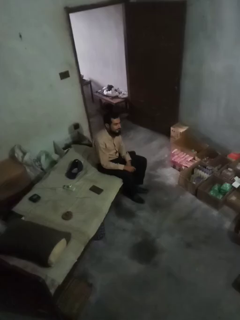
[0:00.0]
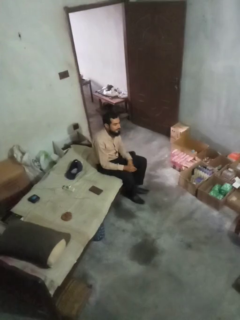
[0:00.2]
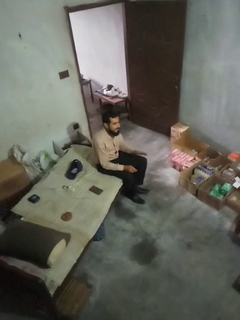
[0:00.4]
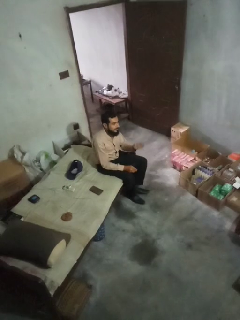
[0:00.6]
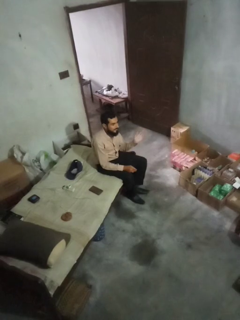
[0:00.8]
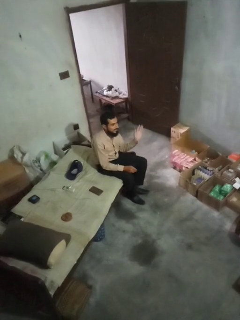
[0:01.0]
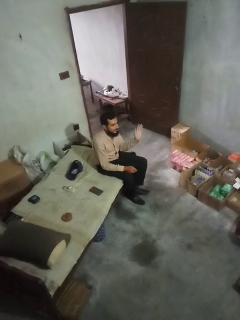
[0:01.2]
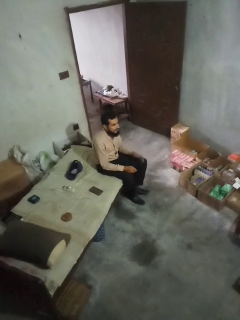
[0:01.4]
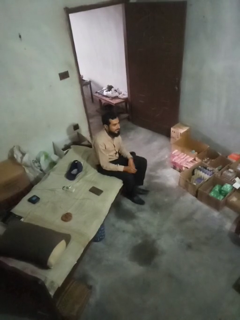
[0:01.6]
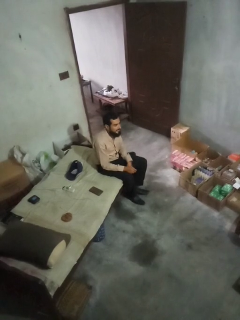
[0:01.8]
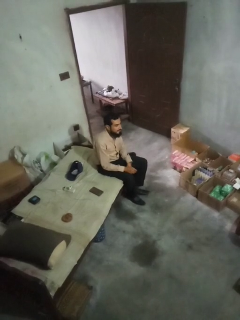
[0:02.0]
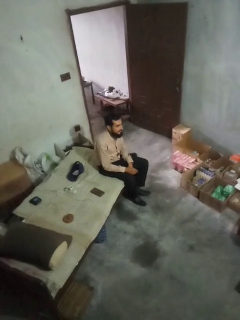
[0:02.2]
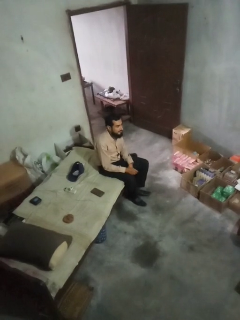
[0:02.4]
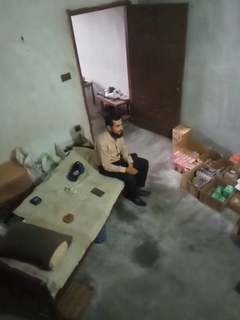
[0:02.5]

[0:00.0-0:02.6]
person gestures swipe left

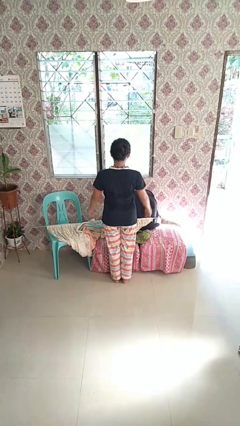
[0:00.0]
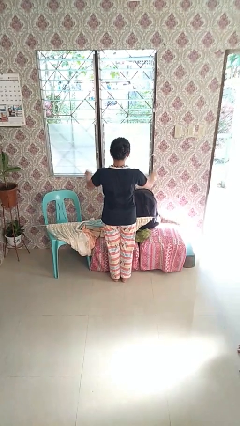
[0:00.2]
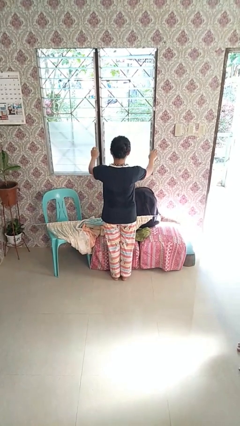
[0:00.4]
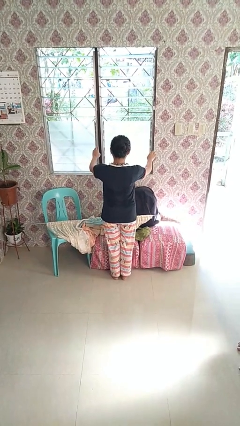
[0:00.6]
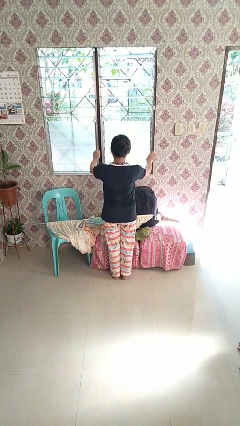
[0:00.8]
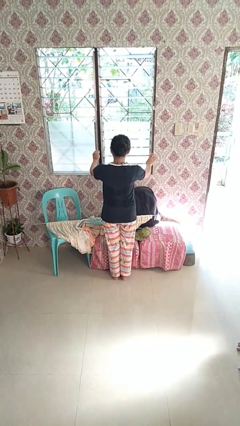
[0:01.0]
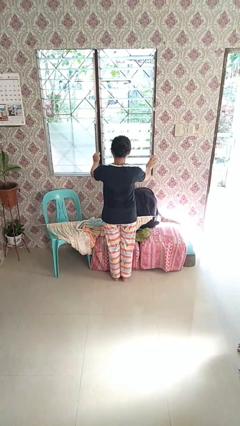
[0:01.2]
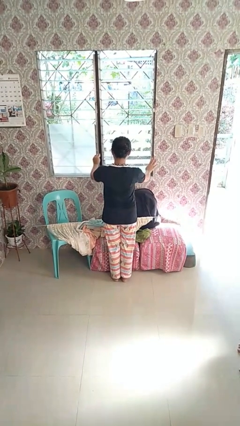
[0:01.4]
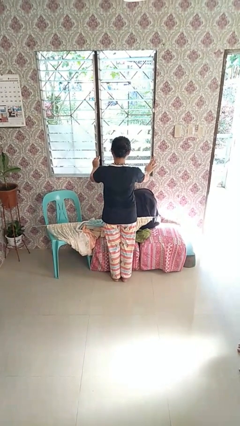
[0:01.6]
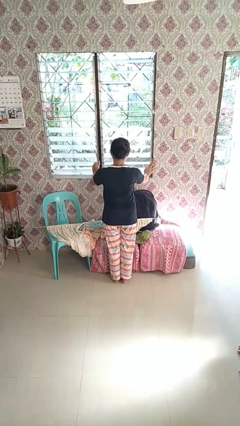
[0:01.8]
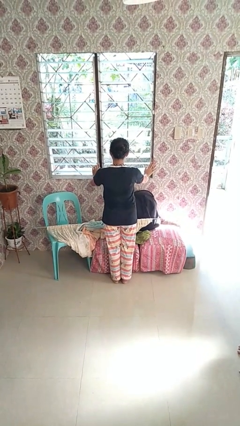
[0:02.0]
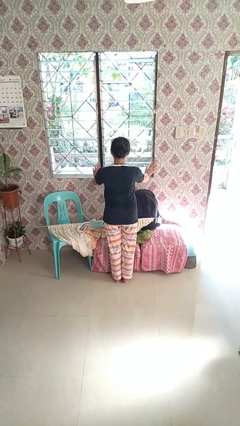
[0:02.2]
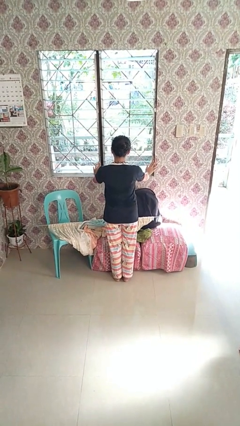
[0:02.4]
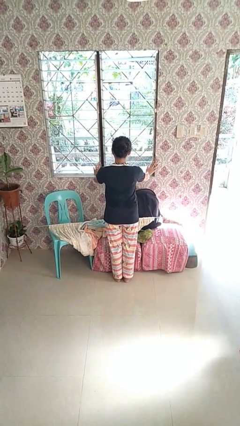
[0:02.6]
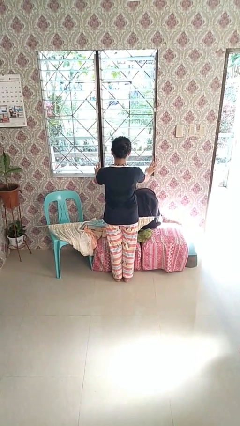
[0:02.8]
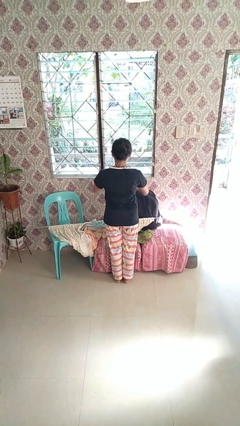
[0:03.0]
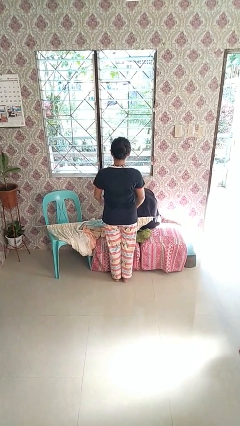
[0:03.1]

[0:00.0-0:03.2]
person opens home window

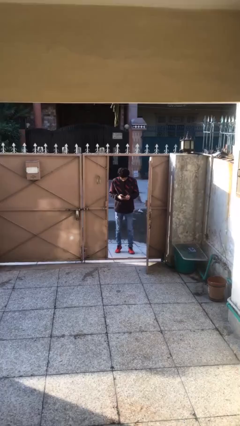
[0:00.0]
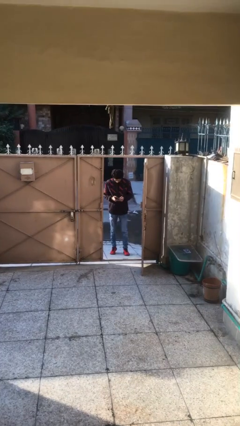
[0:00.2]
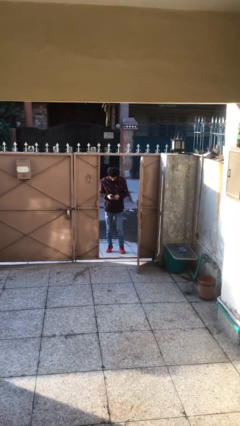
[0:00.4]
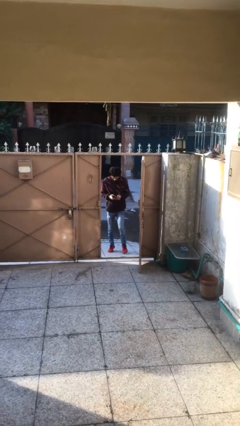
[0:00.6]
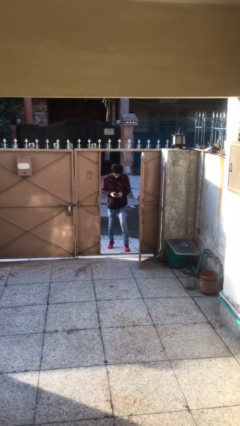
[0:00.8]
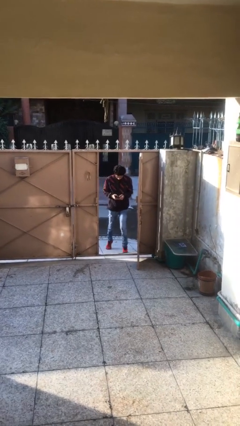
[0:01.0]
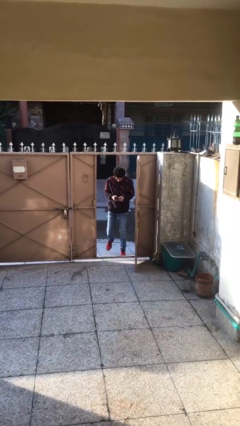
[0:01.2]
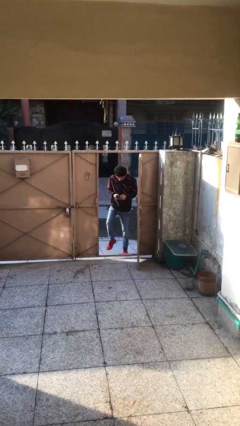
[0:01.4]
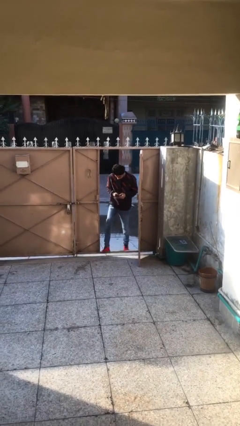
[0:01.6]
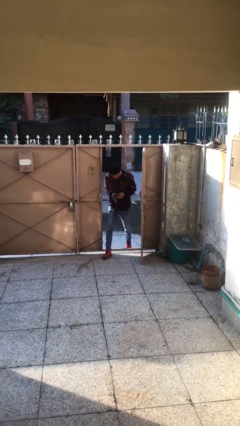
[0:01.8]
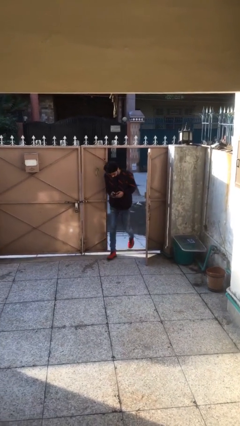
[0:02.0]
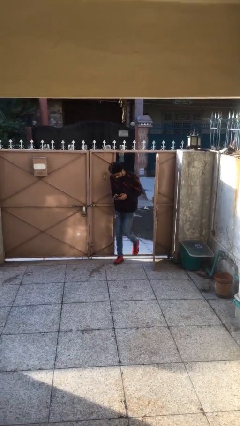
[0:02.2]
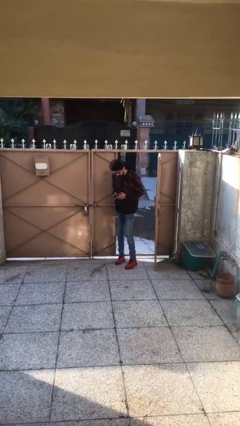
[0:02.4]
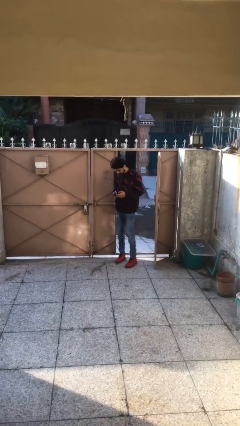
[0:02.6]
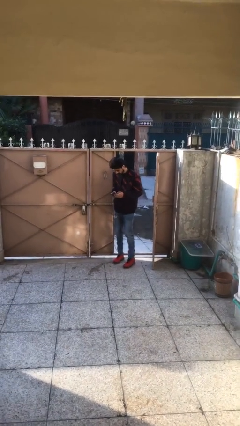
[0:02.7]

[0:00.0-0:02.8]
person enters scene through structure

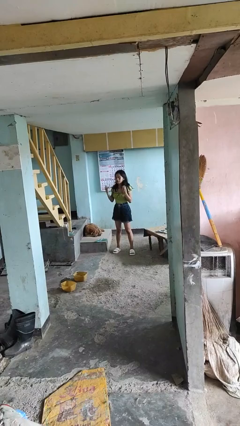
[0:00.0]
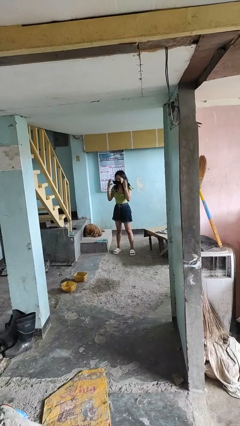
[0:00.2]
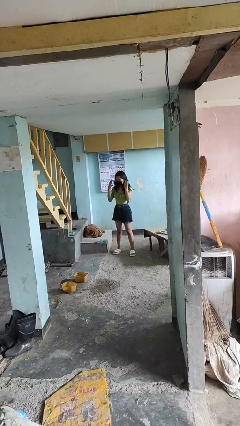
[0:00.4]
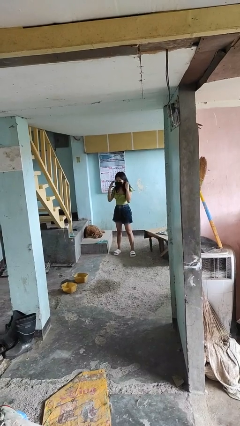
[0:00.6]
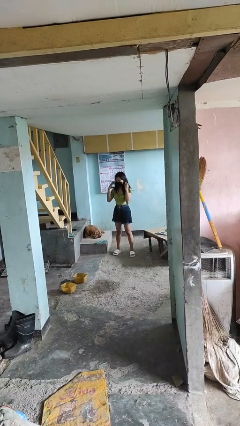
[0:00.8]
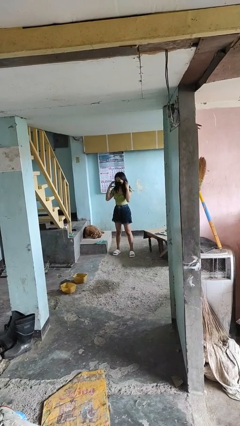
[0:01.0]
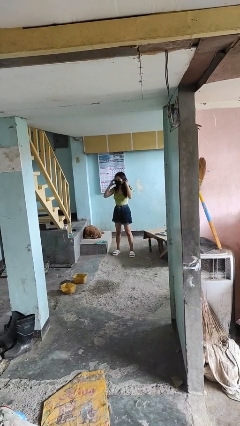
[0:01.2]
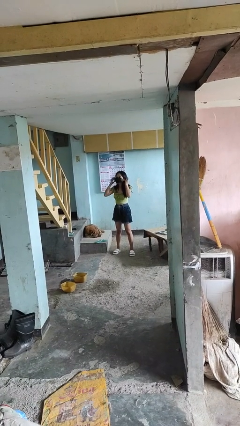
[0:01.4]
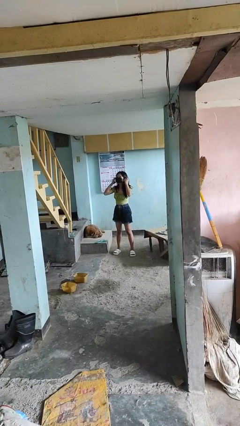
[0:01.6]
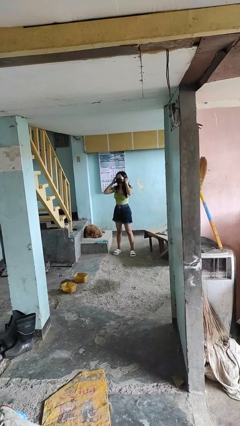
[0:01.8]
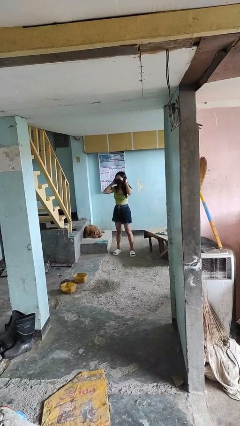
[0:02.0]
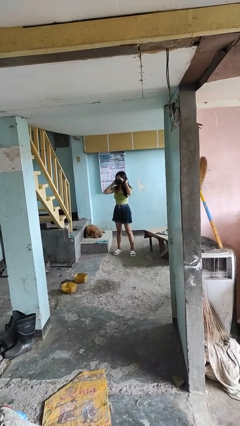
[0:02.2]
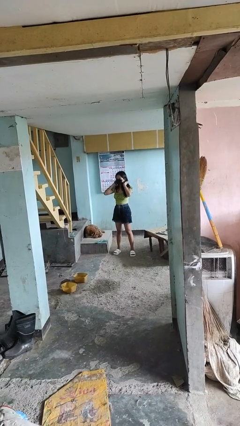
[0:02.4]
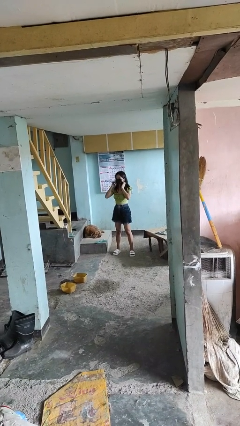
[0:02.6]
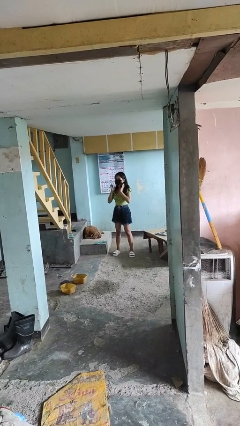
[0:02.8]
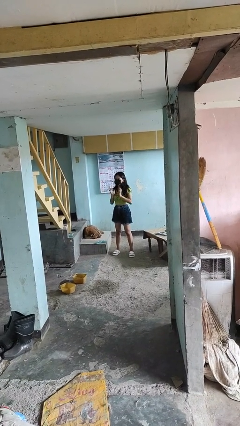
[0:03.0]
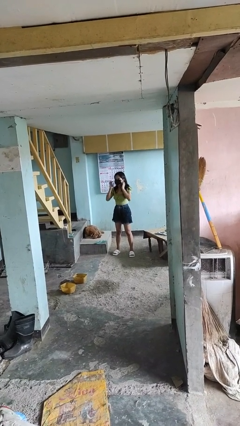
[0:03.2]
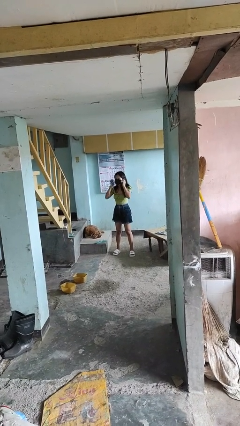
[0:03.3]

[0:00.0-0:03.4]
person puts on facemask

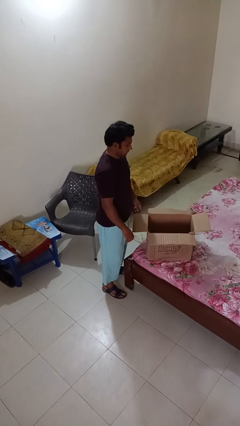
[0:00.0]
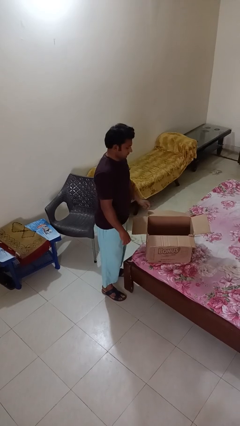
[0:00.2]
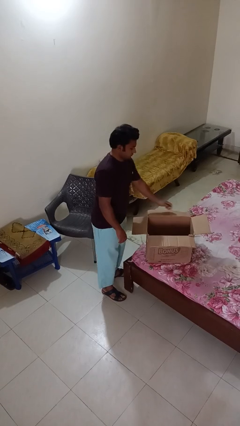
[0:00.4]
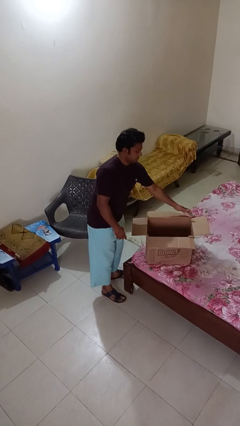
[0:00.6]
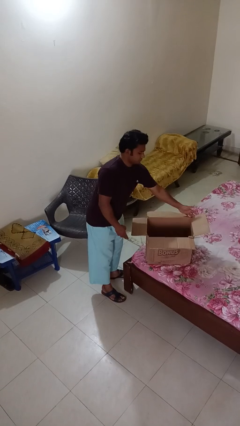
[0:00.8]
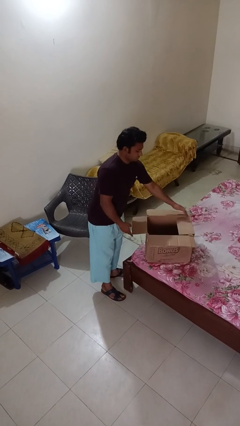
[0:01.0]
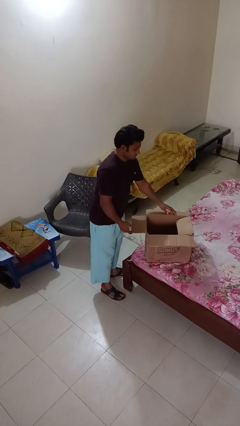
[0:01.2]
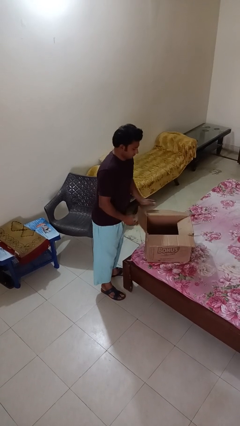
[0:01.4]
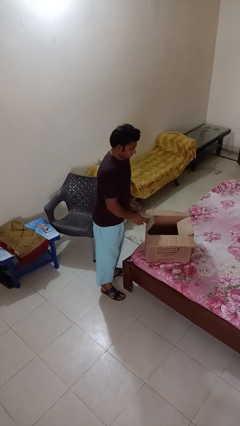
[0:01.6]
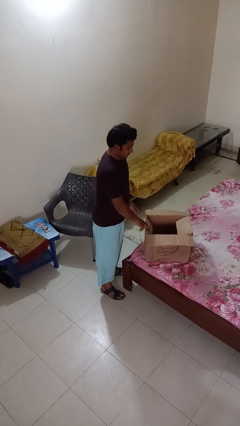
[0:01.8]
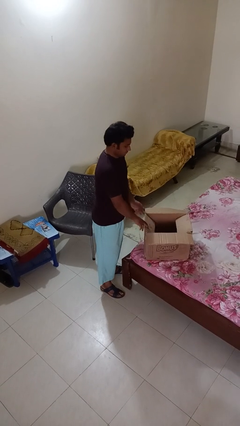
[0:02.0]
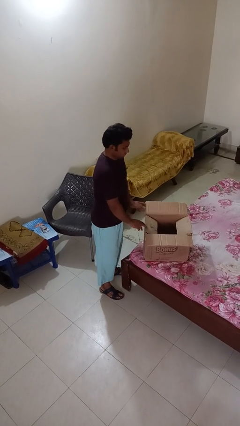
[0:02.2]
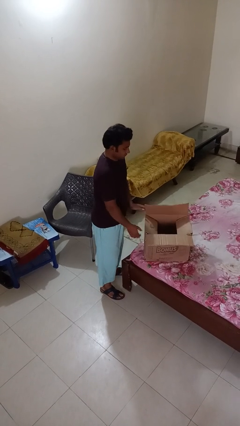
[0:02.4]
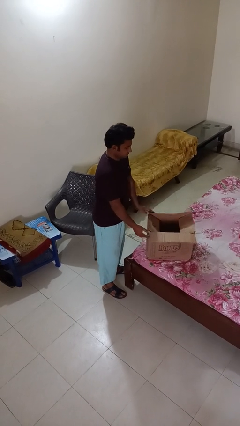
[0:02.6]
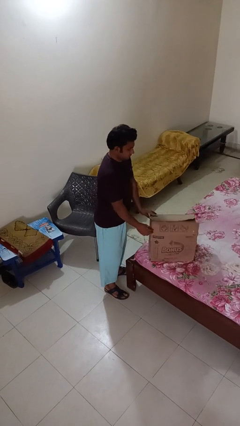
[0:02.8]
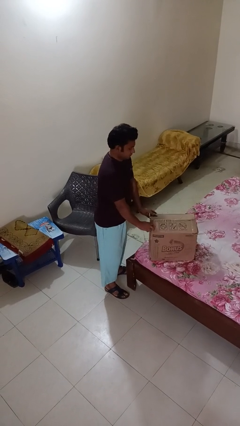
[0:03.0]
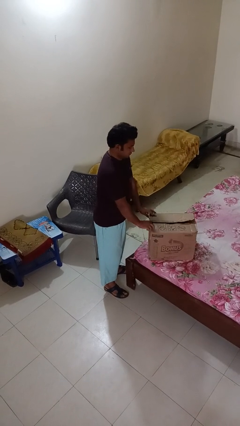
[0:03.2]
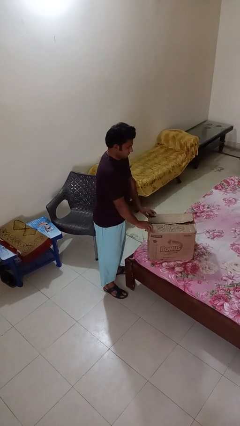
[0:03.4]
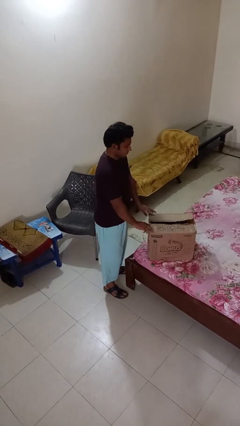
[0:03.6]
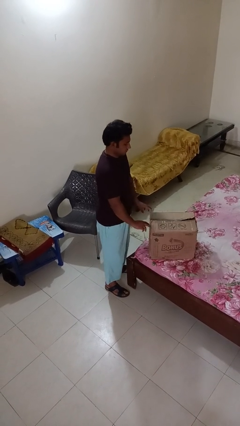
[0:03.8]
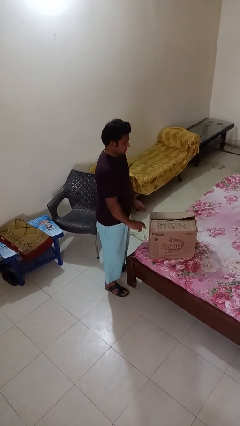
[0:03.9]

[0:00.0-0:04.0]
person closes box

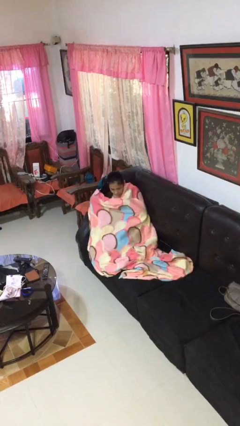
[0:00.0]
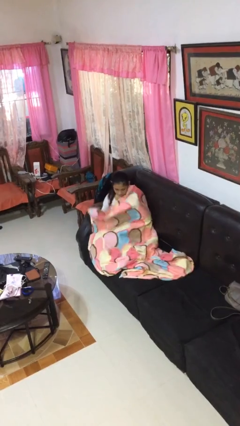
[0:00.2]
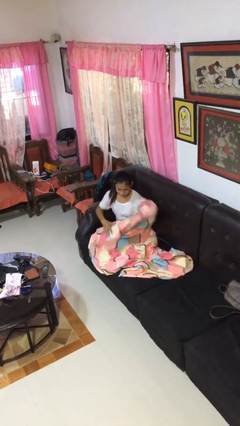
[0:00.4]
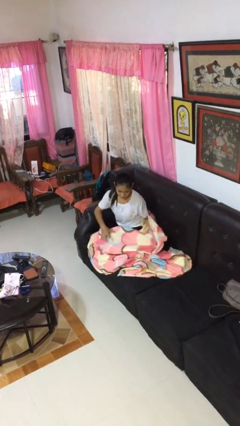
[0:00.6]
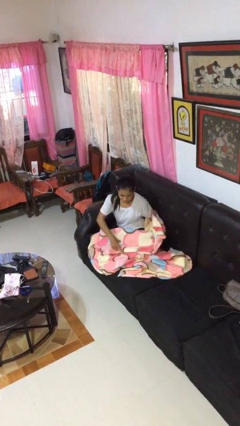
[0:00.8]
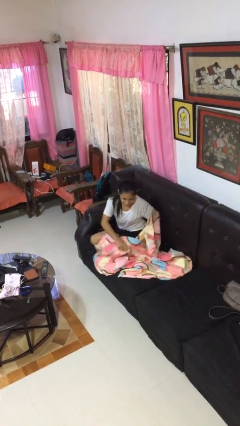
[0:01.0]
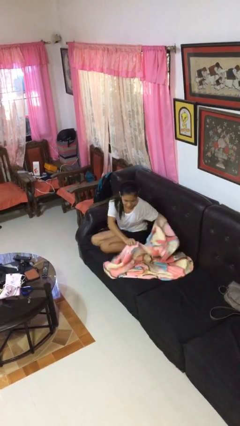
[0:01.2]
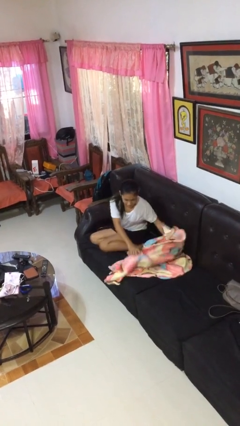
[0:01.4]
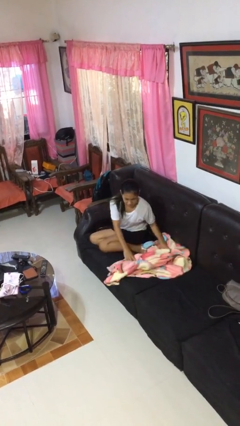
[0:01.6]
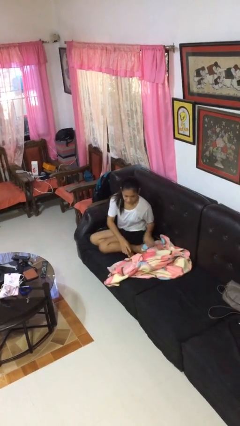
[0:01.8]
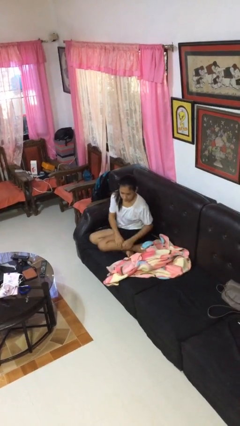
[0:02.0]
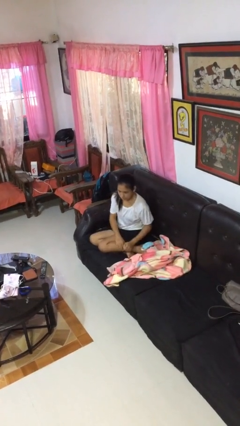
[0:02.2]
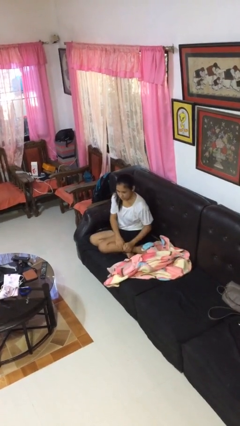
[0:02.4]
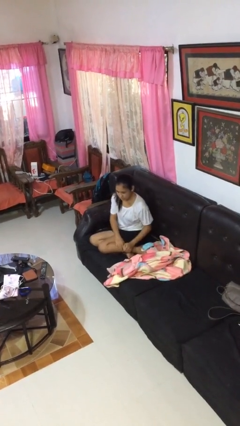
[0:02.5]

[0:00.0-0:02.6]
person uncovers with blanket
